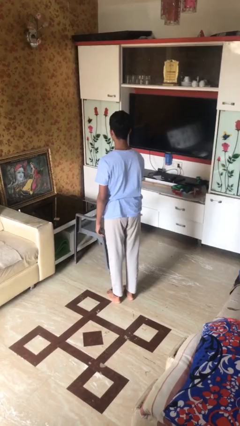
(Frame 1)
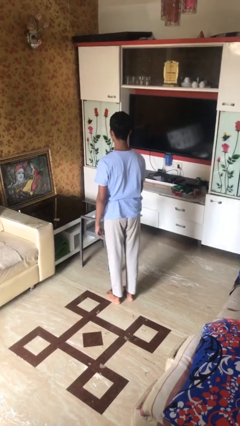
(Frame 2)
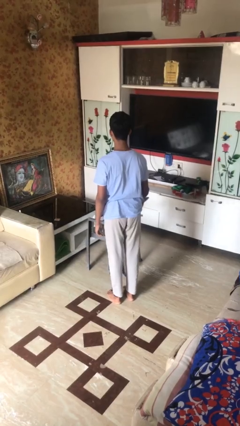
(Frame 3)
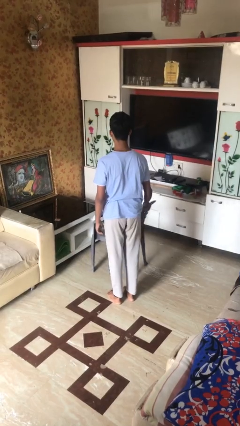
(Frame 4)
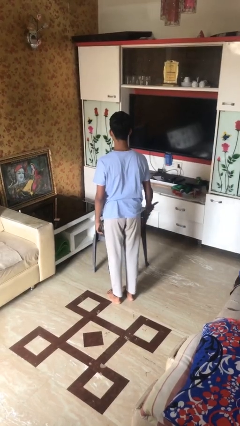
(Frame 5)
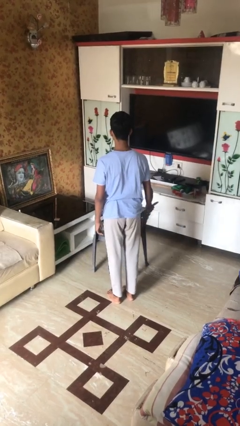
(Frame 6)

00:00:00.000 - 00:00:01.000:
person pulls out chair

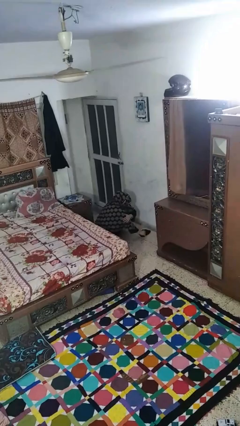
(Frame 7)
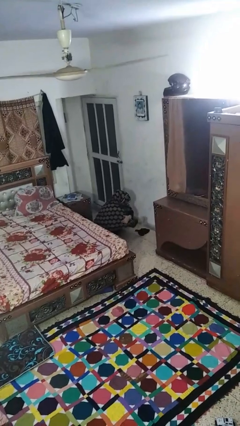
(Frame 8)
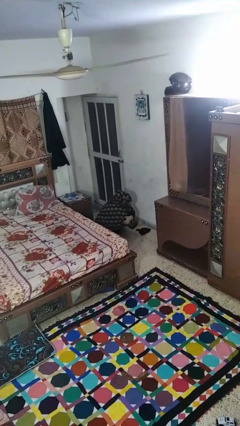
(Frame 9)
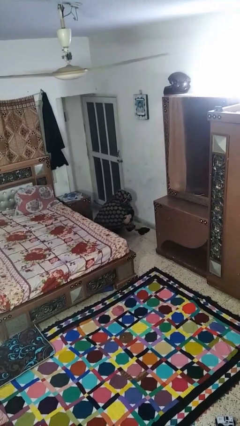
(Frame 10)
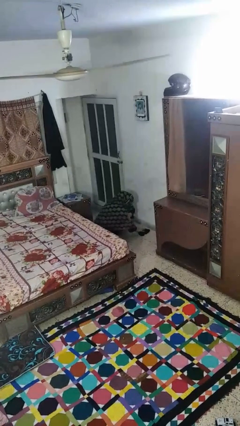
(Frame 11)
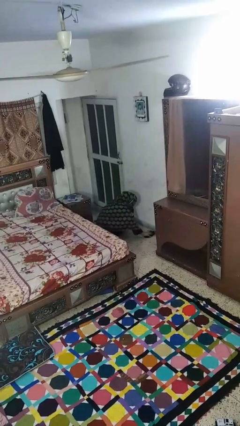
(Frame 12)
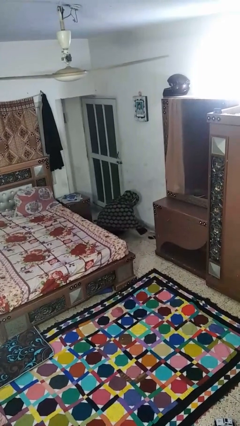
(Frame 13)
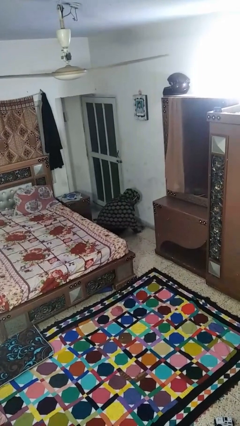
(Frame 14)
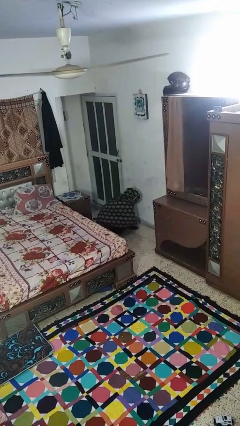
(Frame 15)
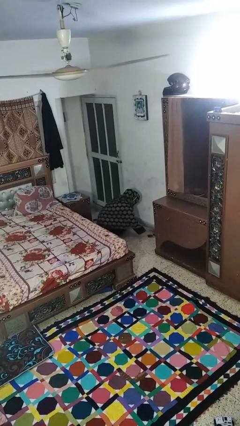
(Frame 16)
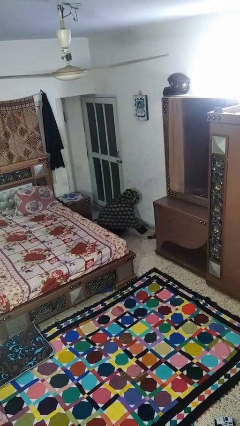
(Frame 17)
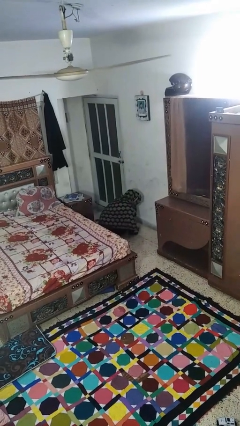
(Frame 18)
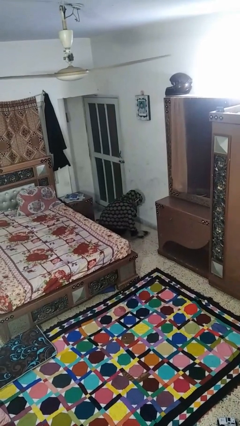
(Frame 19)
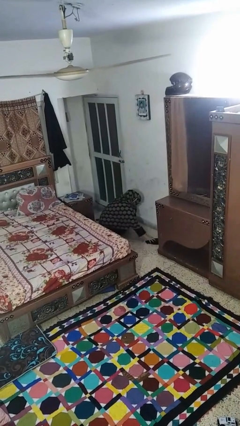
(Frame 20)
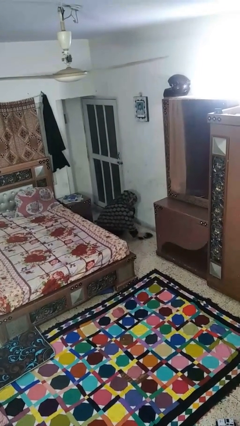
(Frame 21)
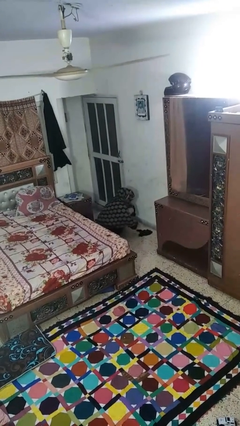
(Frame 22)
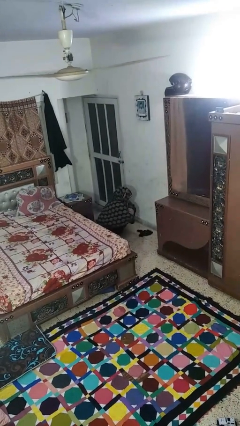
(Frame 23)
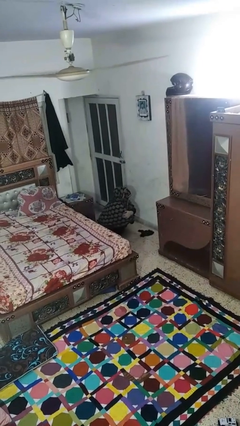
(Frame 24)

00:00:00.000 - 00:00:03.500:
person mops

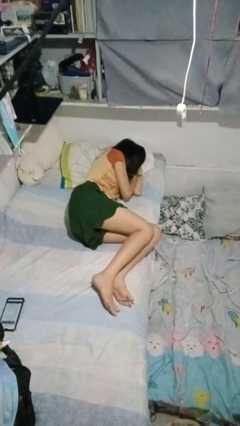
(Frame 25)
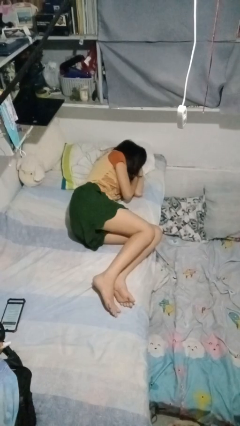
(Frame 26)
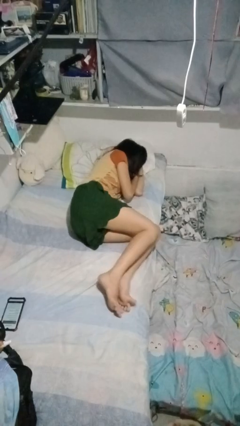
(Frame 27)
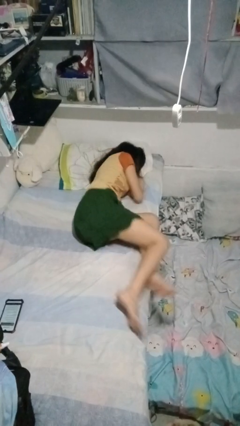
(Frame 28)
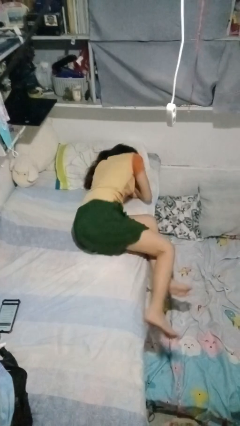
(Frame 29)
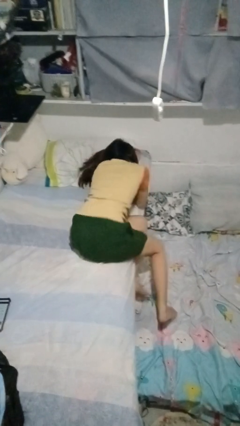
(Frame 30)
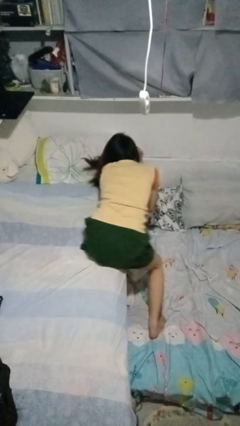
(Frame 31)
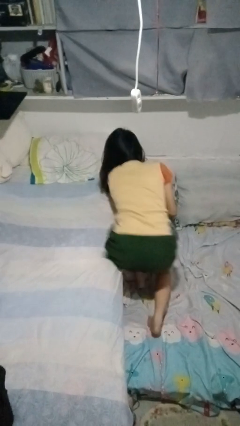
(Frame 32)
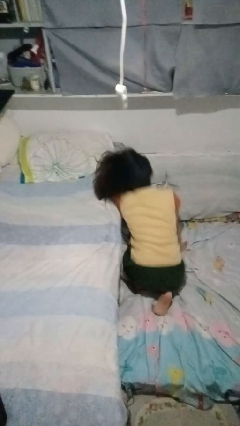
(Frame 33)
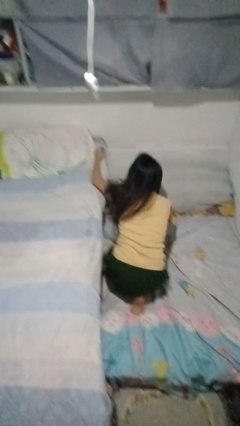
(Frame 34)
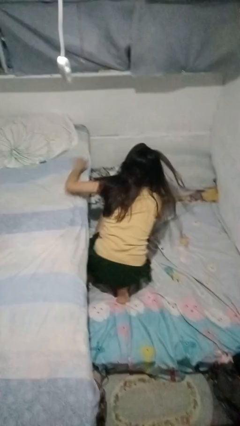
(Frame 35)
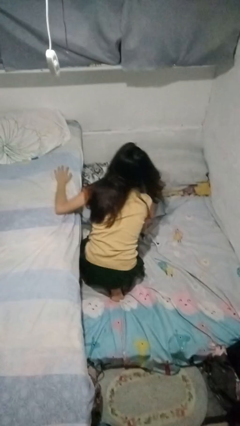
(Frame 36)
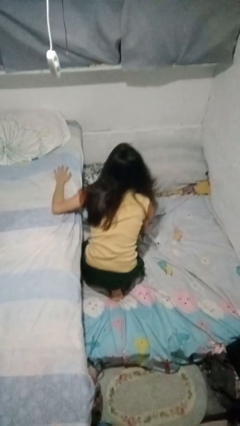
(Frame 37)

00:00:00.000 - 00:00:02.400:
person falls from bed

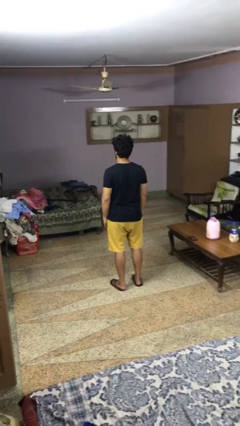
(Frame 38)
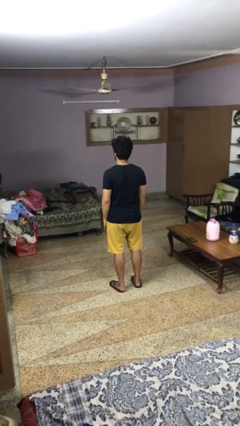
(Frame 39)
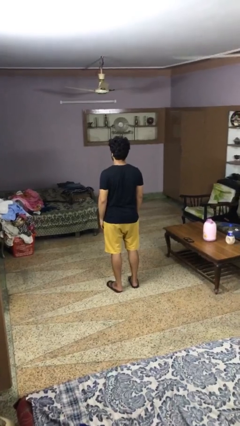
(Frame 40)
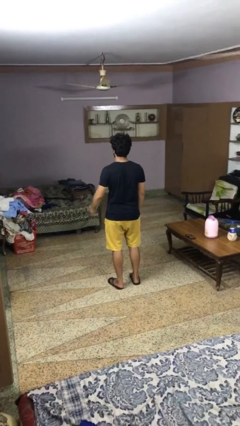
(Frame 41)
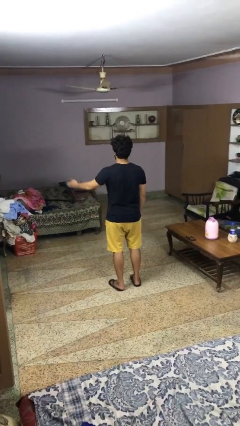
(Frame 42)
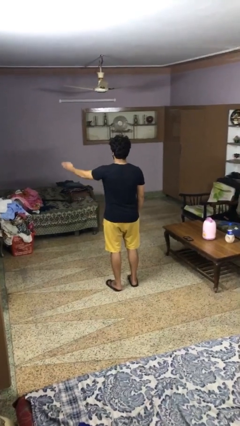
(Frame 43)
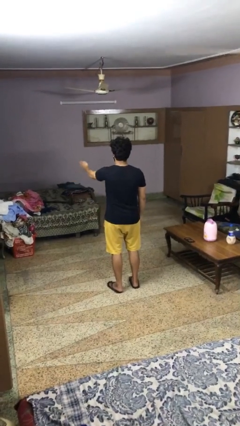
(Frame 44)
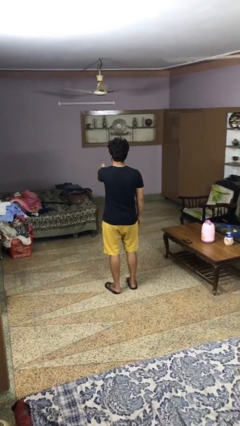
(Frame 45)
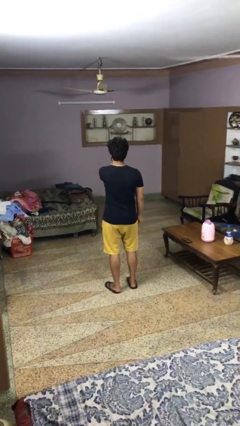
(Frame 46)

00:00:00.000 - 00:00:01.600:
person gestures swipe right

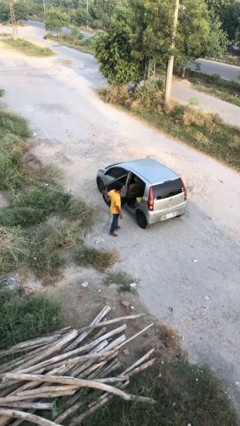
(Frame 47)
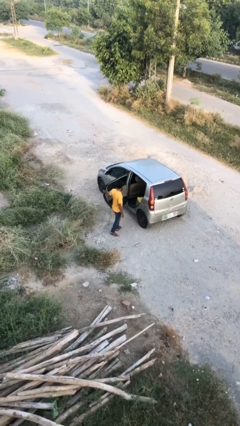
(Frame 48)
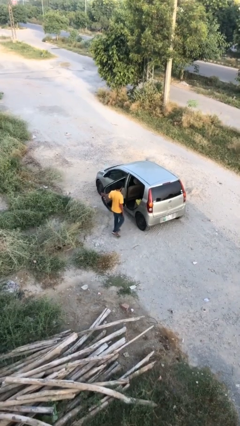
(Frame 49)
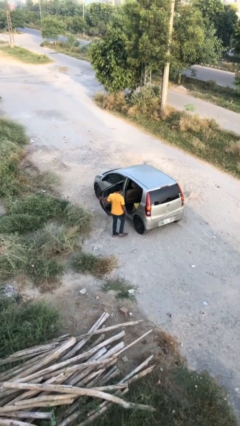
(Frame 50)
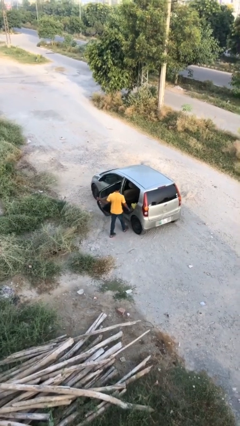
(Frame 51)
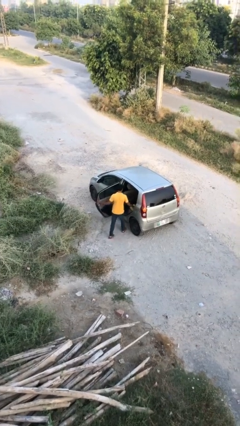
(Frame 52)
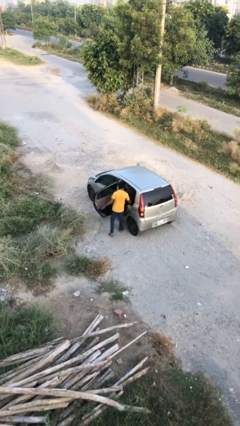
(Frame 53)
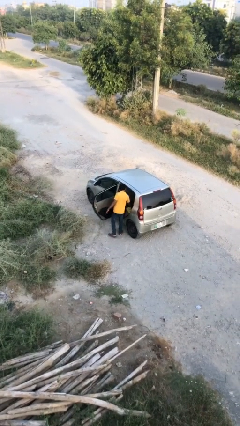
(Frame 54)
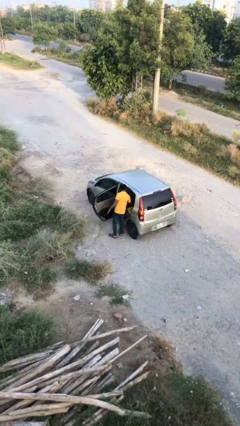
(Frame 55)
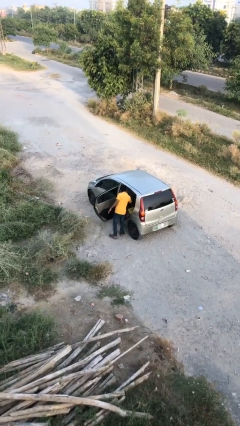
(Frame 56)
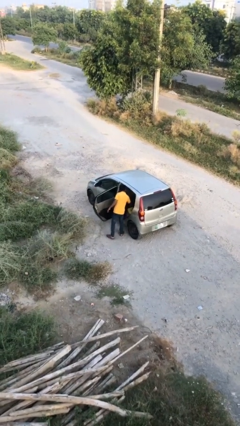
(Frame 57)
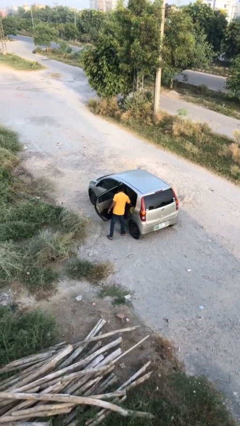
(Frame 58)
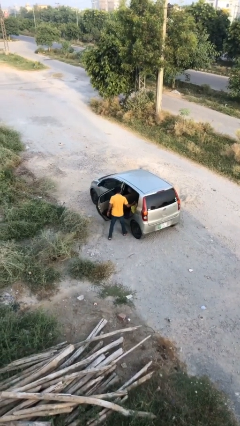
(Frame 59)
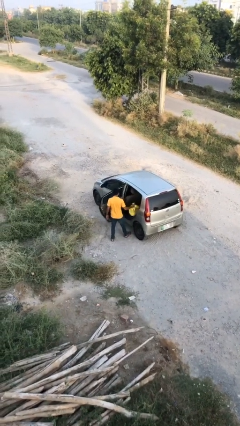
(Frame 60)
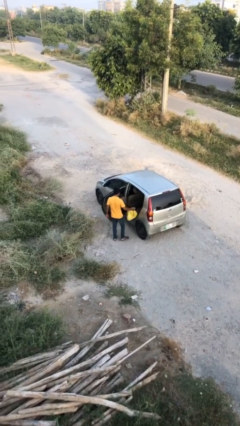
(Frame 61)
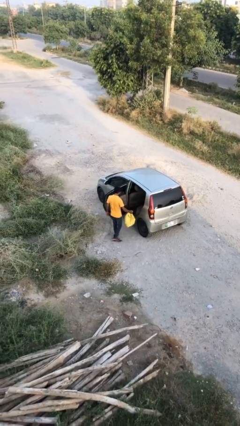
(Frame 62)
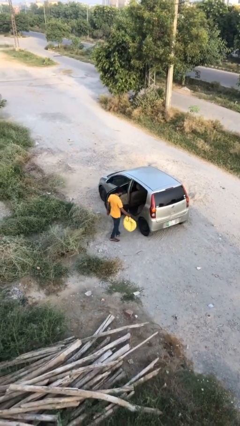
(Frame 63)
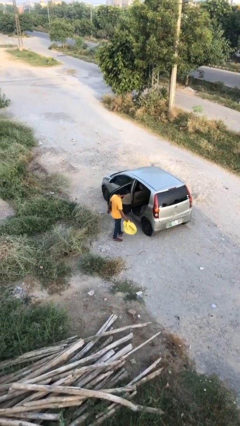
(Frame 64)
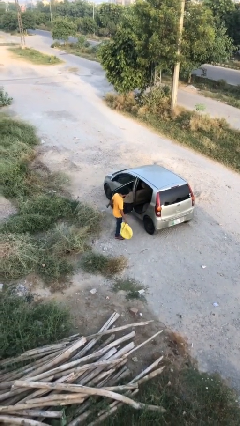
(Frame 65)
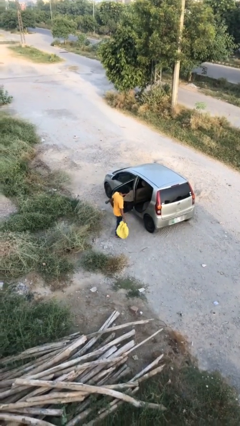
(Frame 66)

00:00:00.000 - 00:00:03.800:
person unloads car

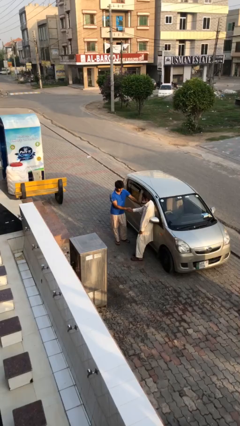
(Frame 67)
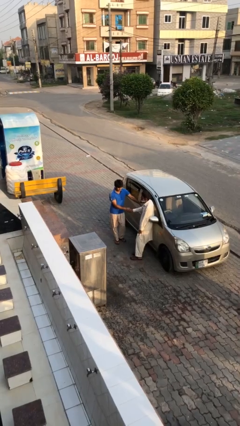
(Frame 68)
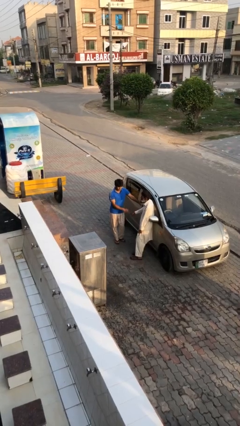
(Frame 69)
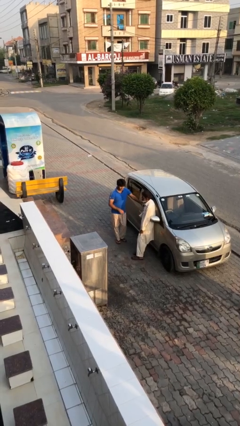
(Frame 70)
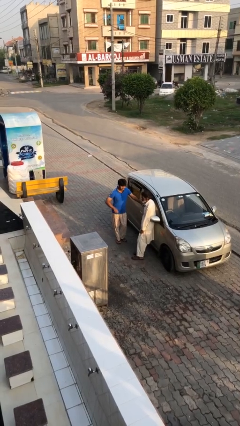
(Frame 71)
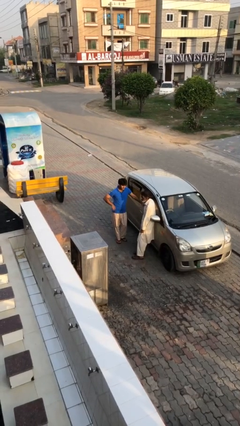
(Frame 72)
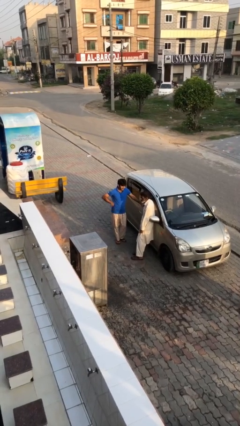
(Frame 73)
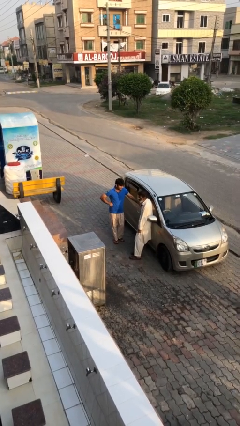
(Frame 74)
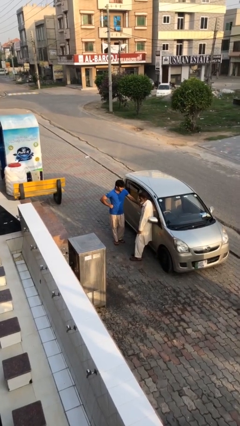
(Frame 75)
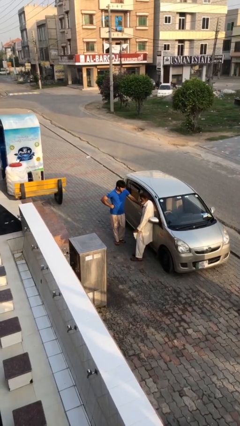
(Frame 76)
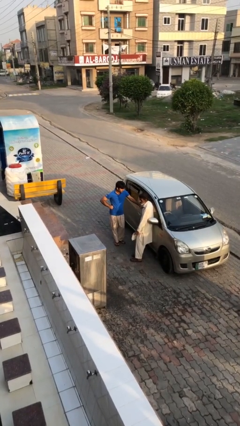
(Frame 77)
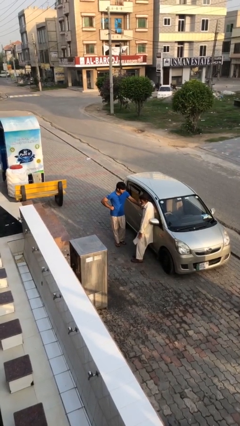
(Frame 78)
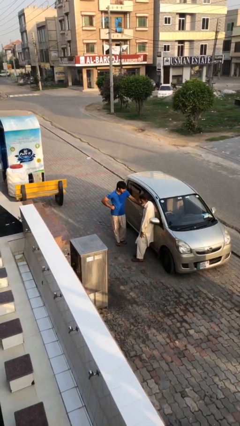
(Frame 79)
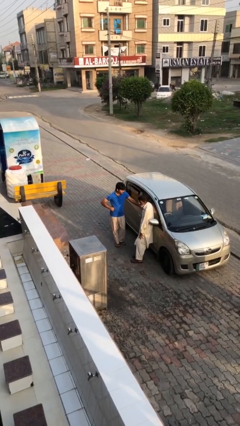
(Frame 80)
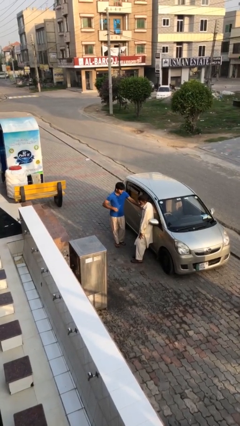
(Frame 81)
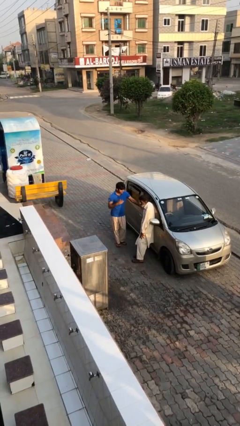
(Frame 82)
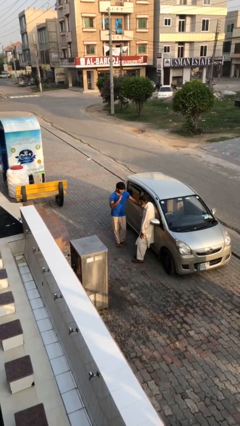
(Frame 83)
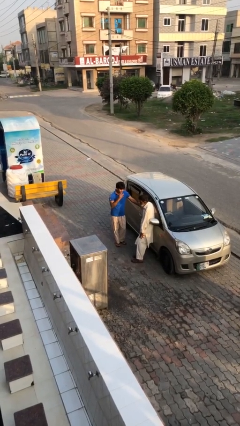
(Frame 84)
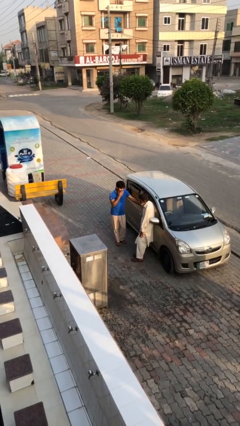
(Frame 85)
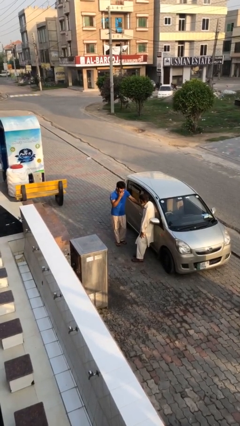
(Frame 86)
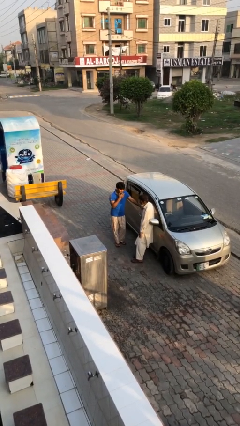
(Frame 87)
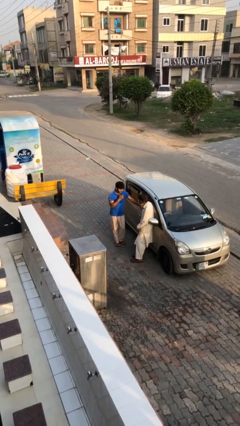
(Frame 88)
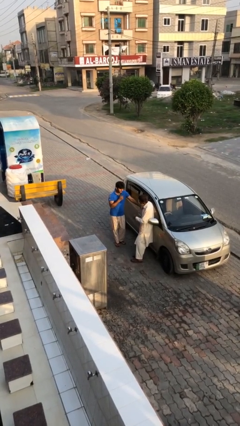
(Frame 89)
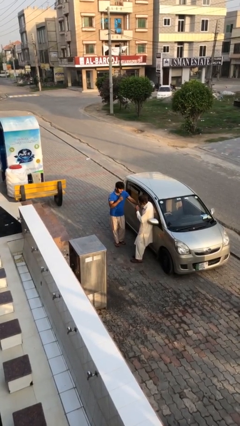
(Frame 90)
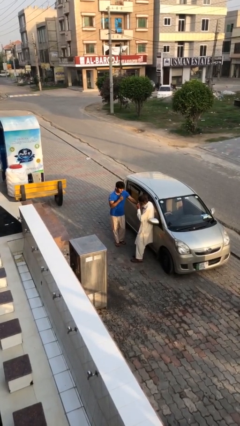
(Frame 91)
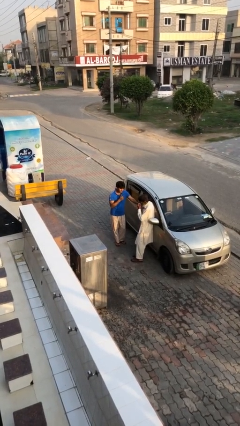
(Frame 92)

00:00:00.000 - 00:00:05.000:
person talks to person

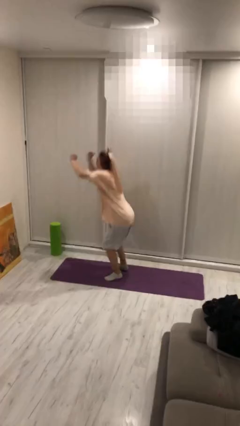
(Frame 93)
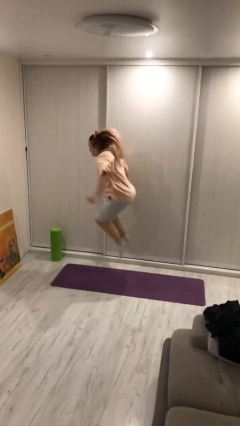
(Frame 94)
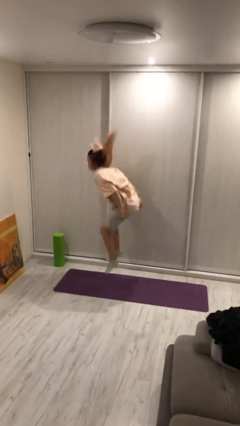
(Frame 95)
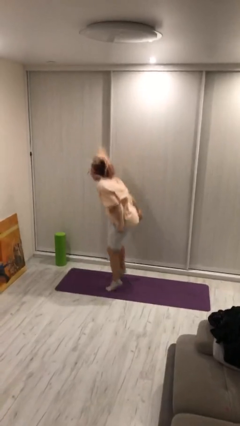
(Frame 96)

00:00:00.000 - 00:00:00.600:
person jumps
